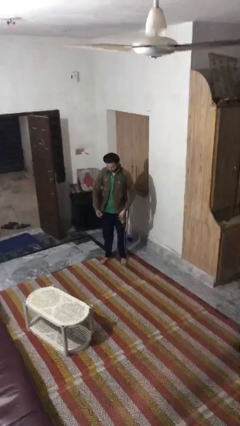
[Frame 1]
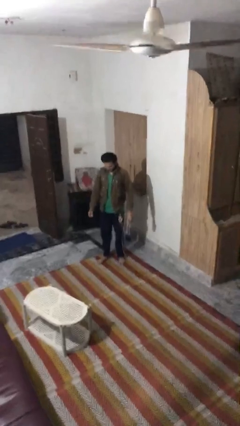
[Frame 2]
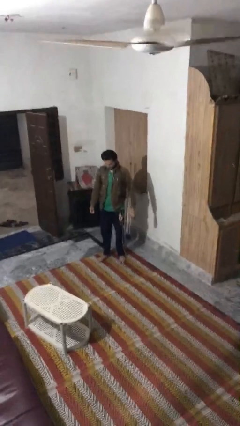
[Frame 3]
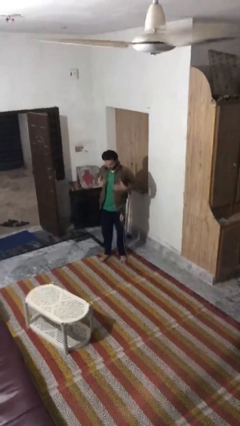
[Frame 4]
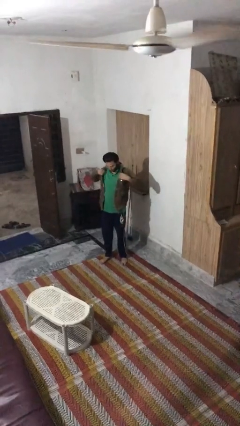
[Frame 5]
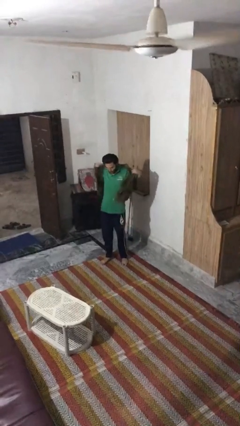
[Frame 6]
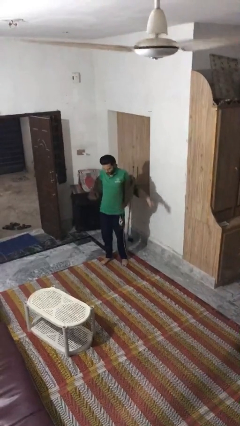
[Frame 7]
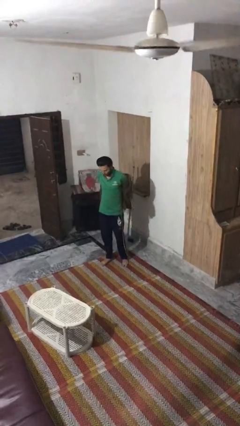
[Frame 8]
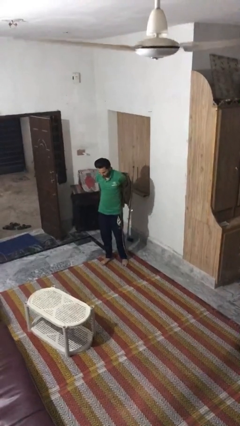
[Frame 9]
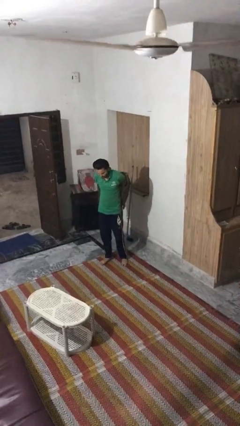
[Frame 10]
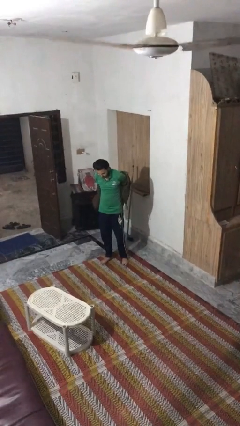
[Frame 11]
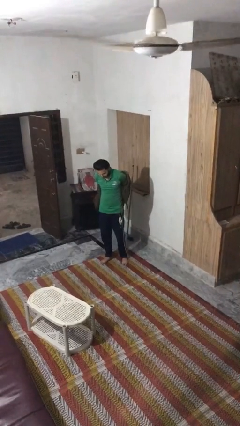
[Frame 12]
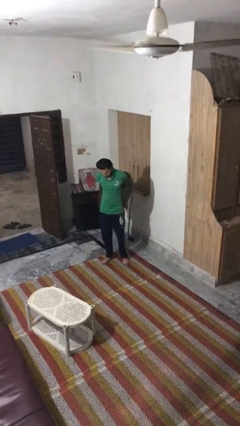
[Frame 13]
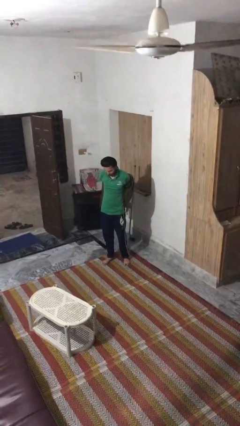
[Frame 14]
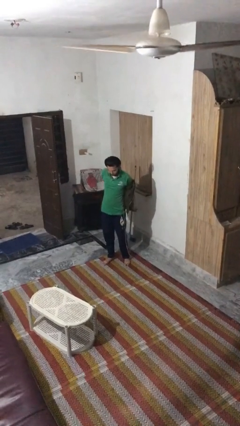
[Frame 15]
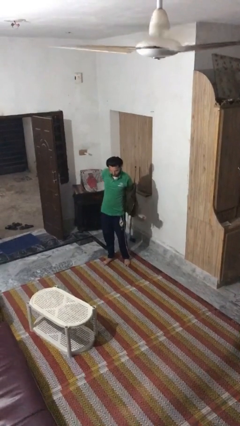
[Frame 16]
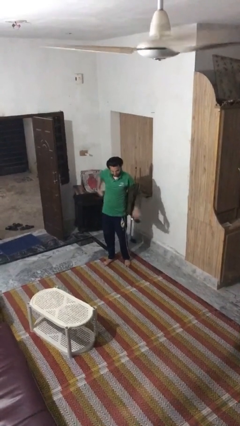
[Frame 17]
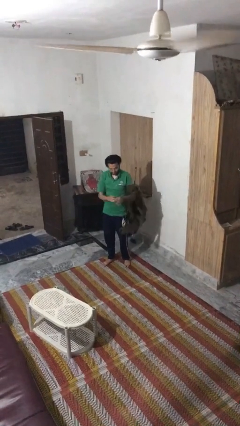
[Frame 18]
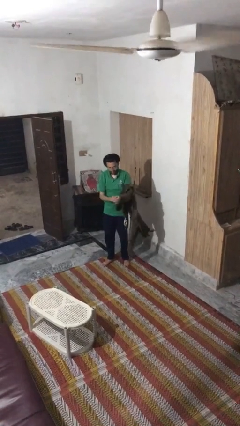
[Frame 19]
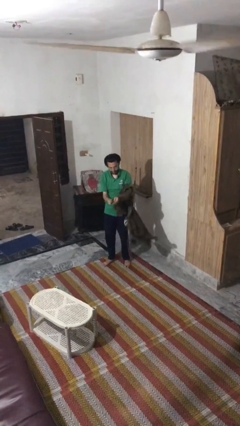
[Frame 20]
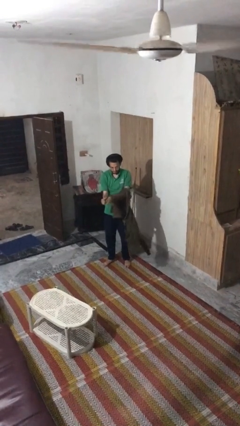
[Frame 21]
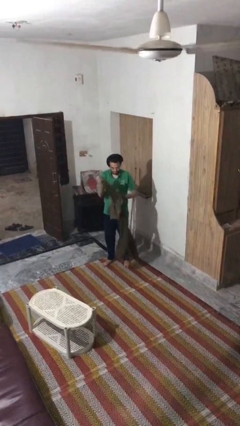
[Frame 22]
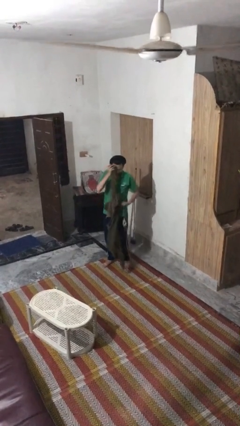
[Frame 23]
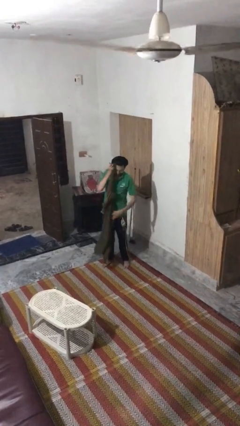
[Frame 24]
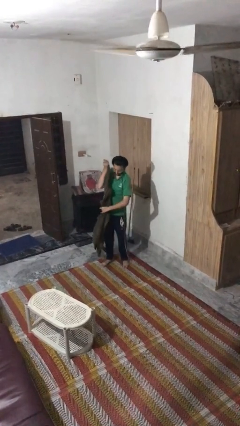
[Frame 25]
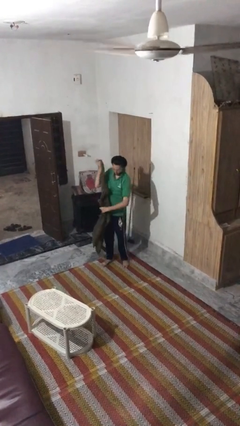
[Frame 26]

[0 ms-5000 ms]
person takes off jacket

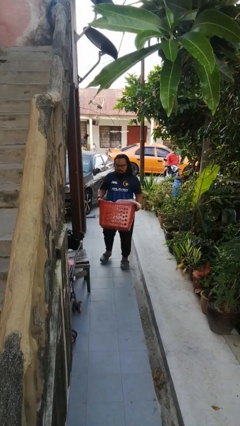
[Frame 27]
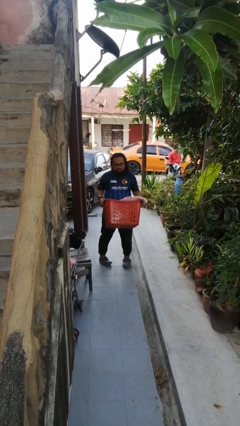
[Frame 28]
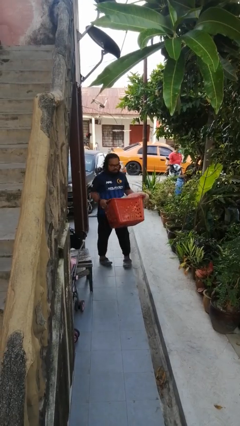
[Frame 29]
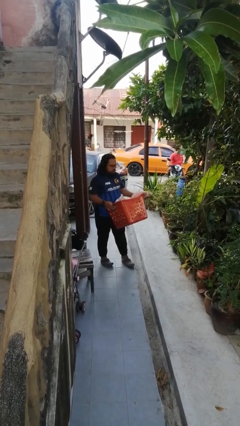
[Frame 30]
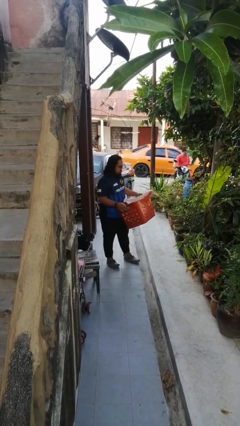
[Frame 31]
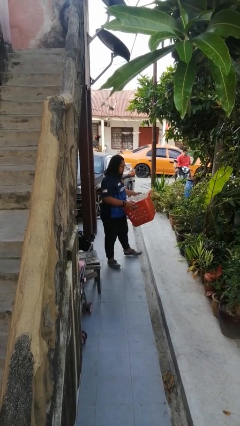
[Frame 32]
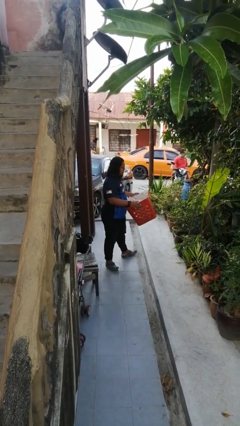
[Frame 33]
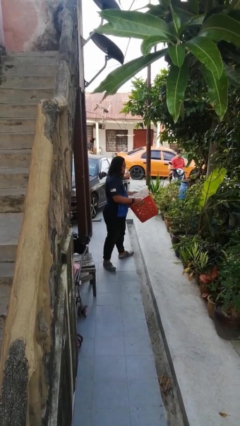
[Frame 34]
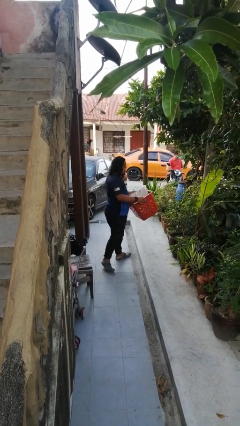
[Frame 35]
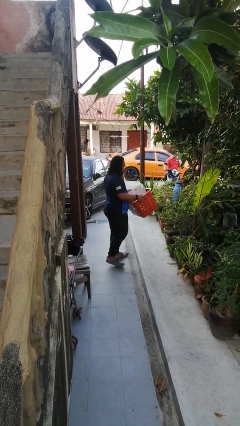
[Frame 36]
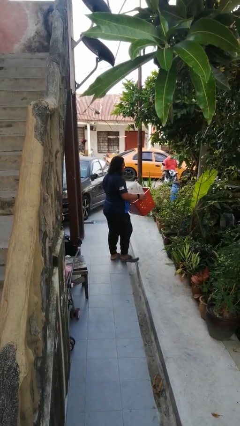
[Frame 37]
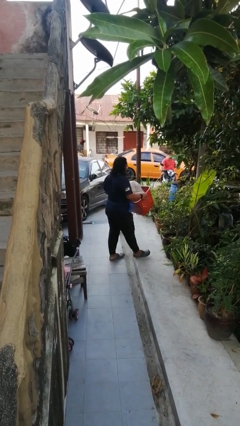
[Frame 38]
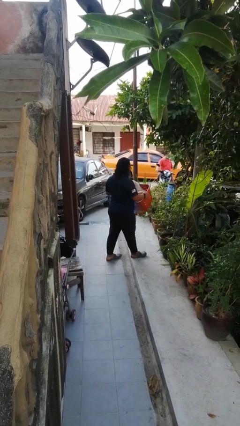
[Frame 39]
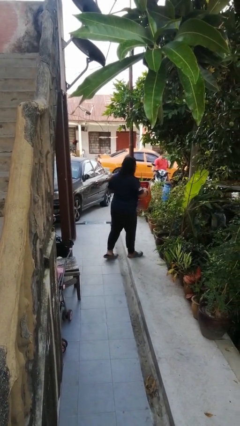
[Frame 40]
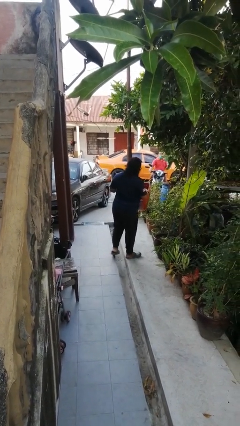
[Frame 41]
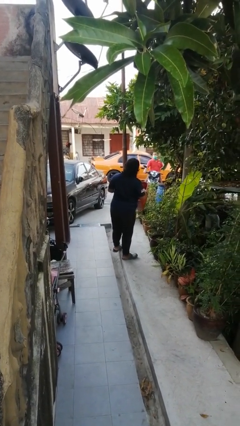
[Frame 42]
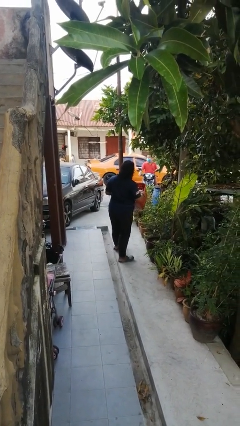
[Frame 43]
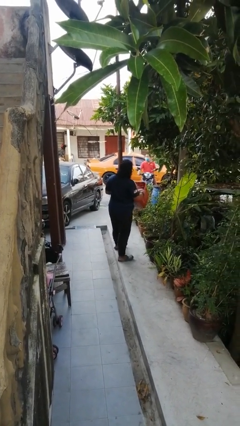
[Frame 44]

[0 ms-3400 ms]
person carries laundry basket

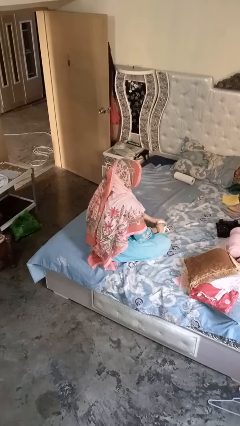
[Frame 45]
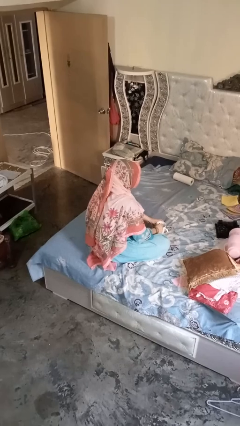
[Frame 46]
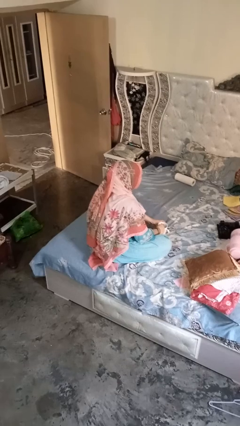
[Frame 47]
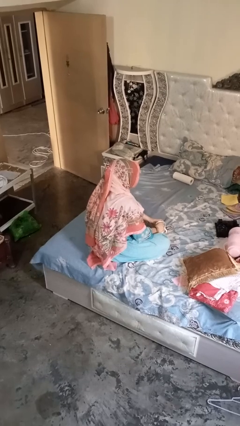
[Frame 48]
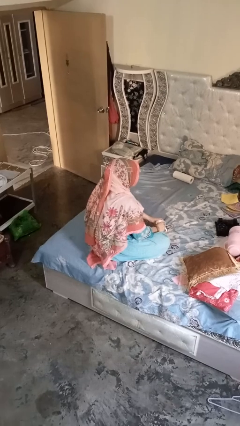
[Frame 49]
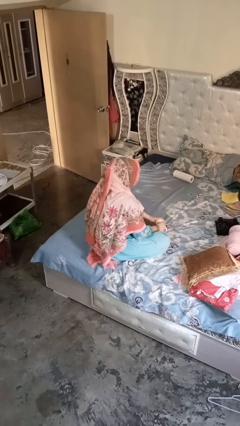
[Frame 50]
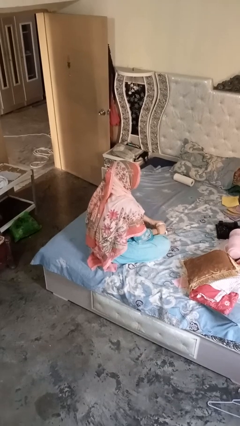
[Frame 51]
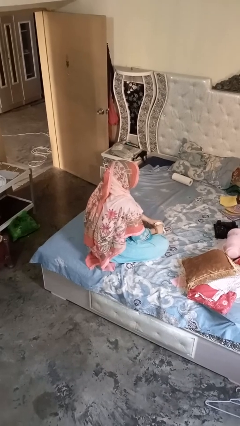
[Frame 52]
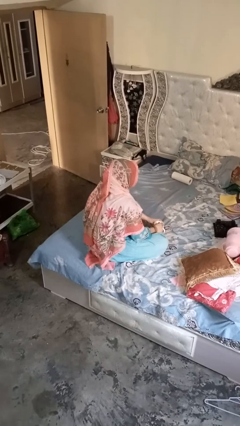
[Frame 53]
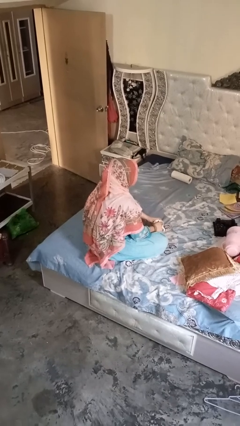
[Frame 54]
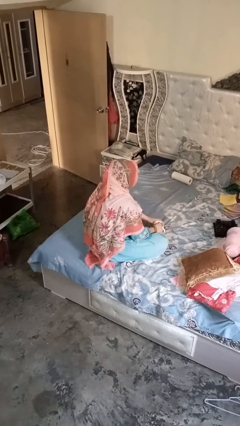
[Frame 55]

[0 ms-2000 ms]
person stirs mug

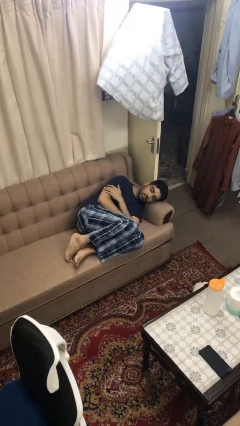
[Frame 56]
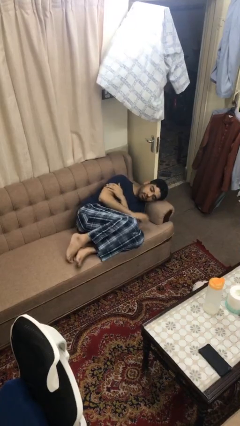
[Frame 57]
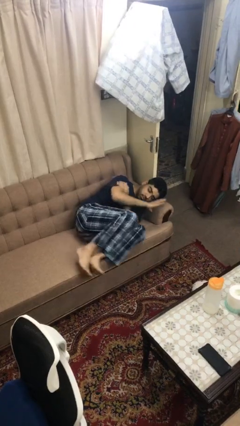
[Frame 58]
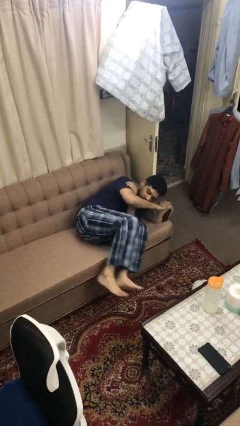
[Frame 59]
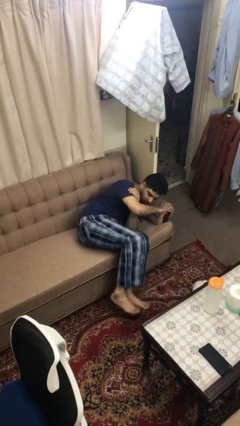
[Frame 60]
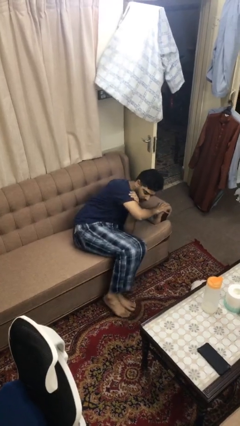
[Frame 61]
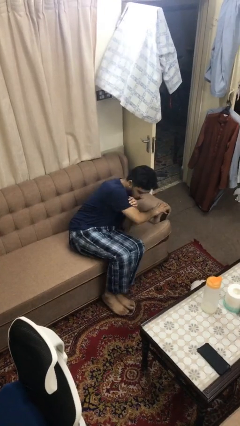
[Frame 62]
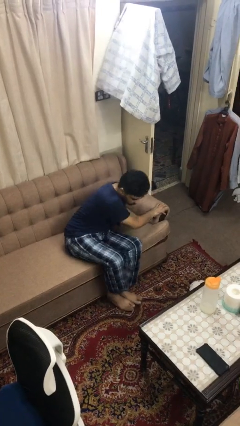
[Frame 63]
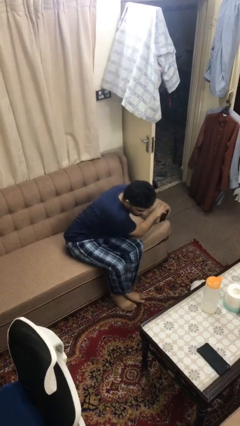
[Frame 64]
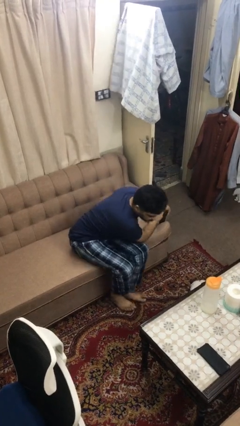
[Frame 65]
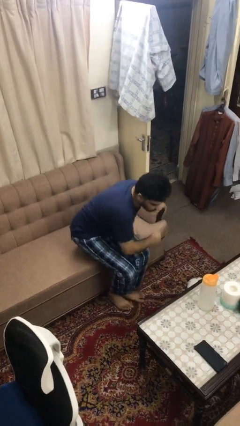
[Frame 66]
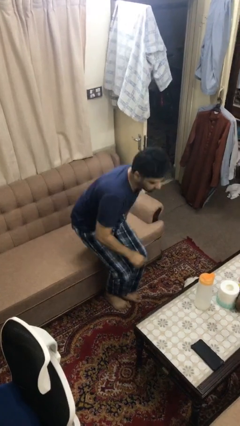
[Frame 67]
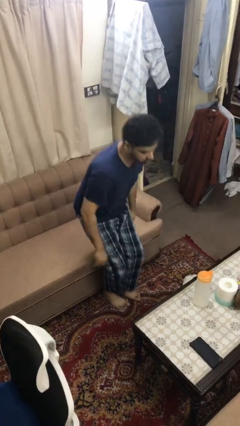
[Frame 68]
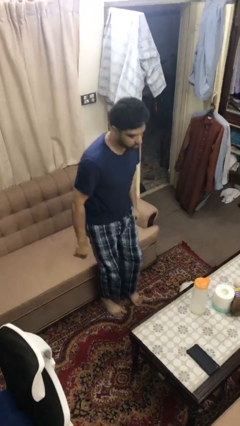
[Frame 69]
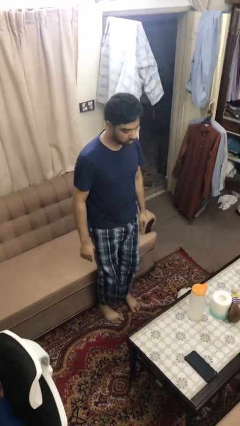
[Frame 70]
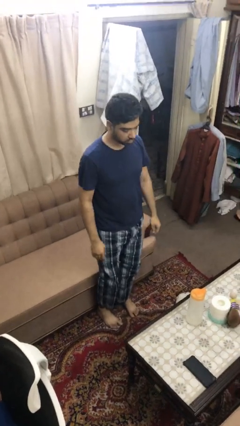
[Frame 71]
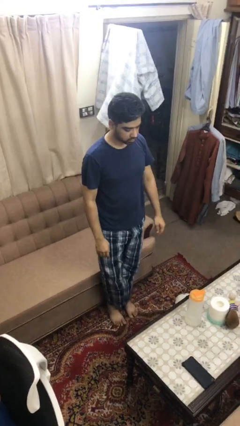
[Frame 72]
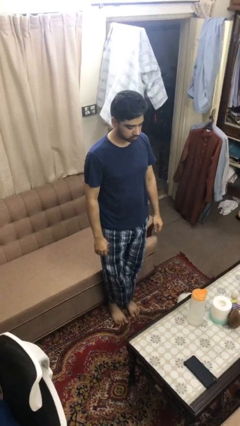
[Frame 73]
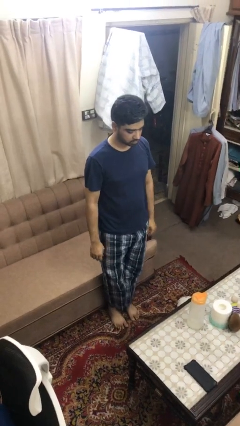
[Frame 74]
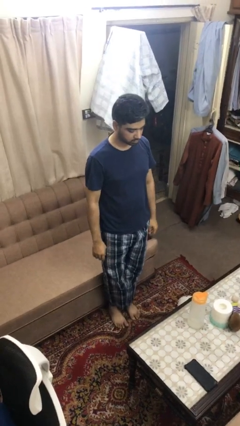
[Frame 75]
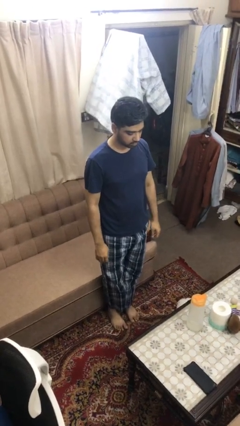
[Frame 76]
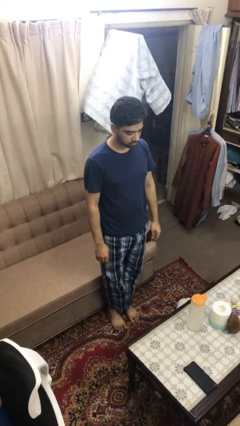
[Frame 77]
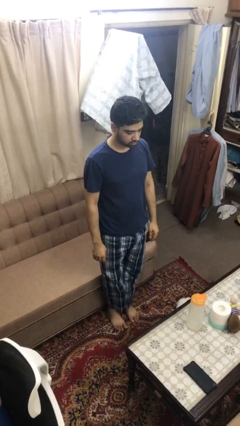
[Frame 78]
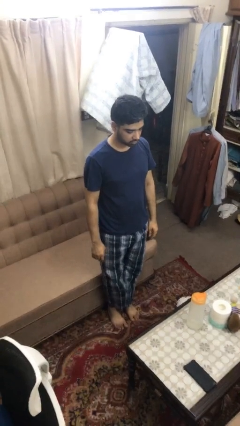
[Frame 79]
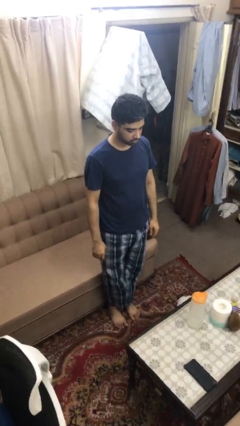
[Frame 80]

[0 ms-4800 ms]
person stands up

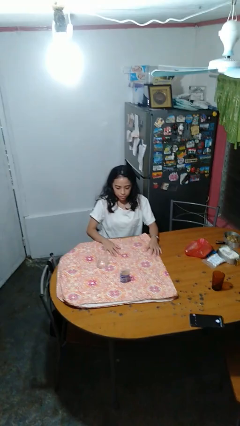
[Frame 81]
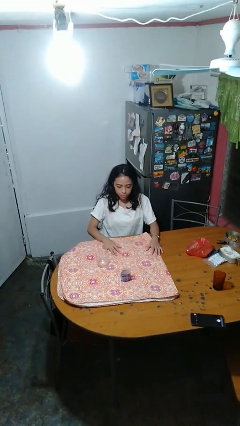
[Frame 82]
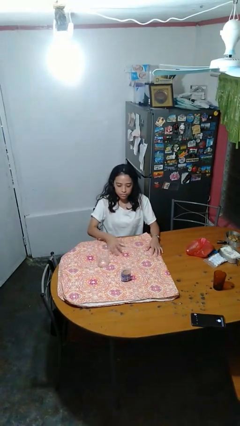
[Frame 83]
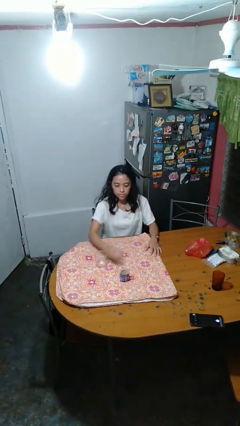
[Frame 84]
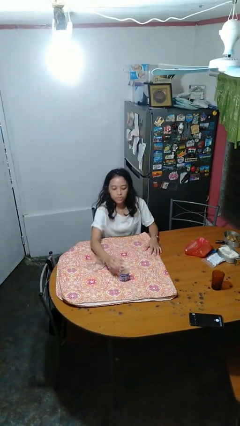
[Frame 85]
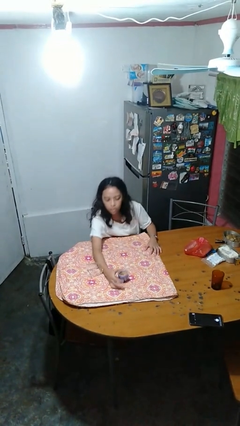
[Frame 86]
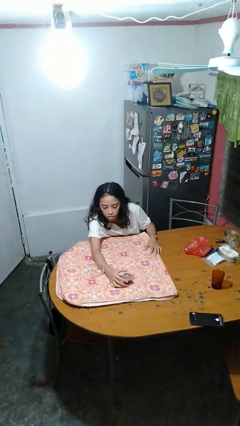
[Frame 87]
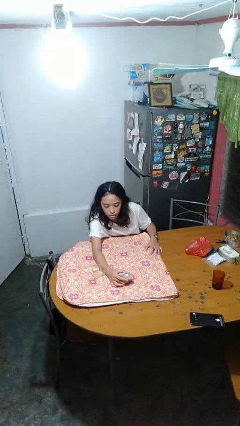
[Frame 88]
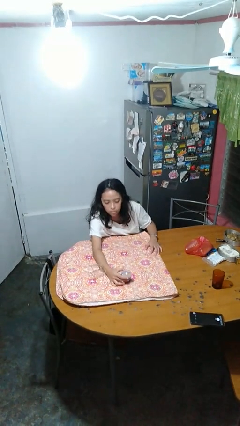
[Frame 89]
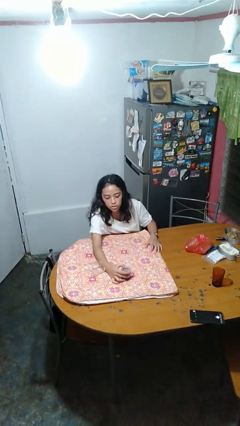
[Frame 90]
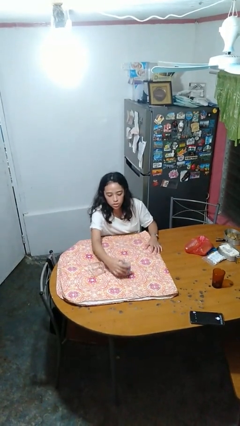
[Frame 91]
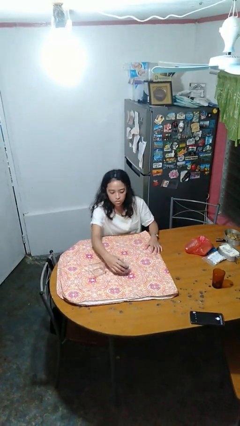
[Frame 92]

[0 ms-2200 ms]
person knocks over glass

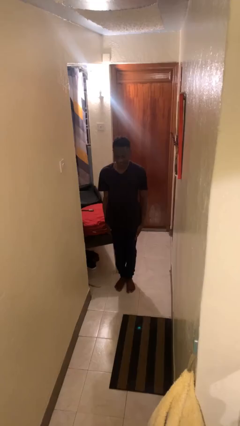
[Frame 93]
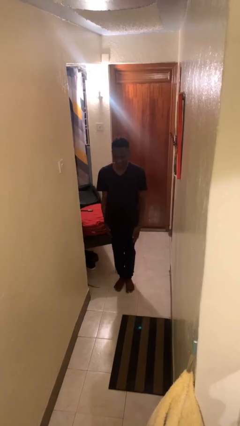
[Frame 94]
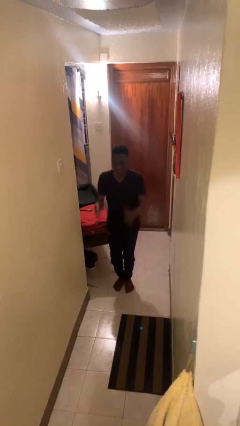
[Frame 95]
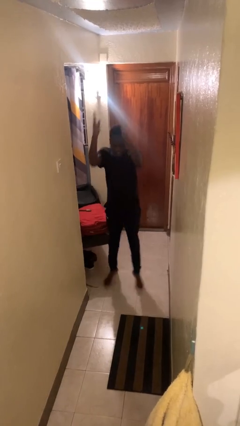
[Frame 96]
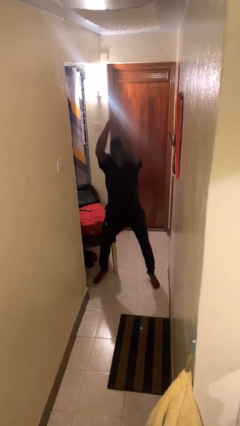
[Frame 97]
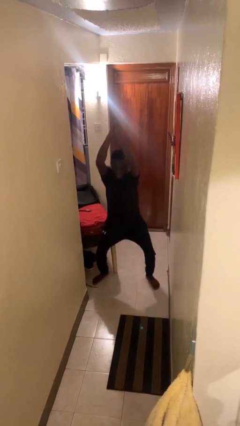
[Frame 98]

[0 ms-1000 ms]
person exercises with jumping jacks
